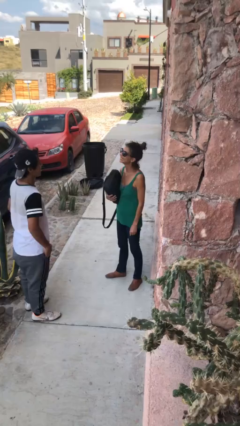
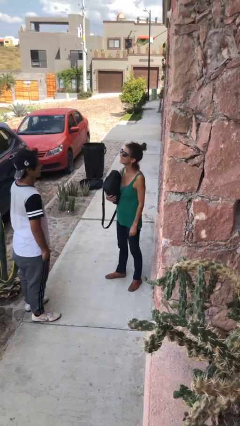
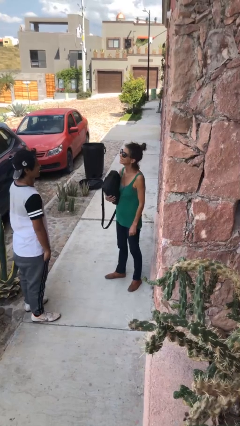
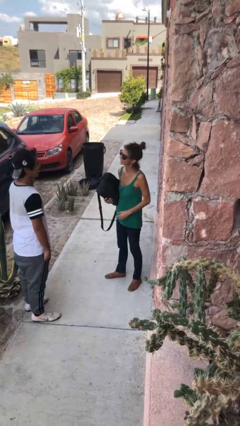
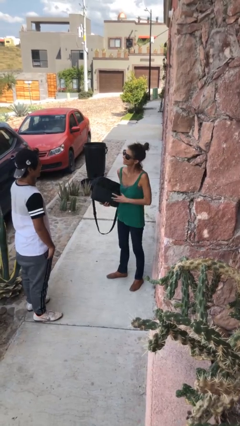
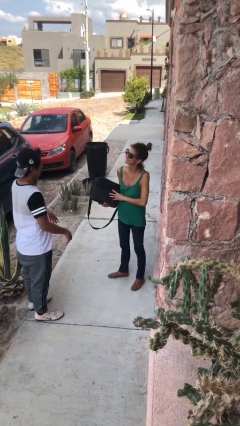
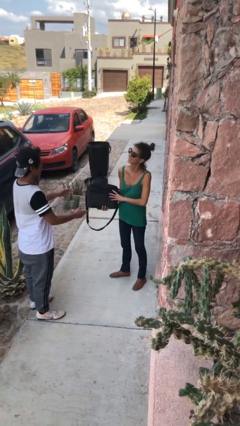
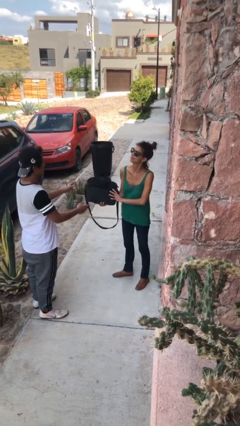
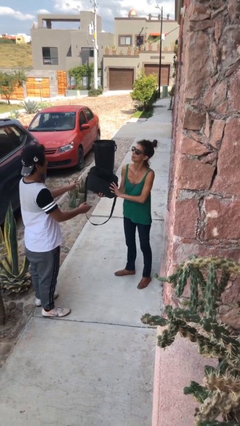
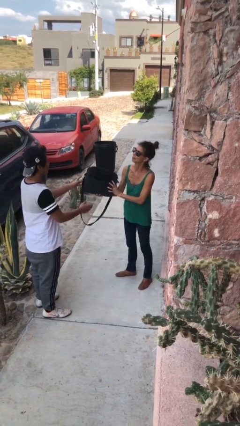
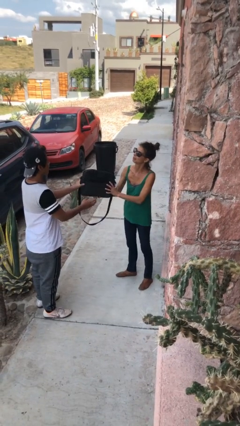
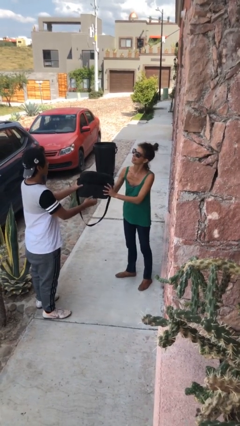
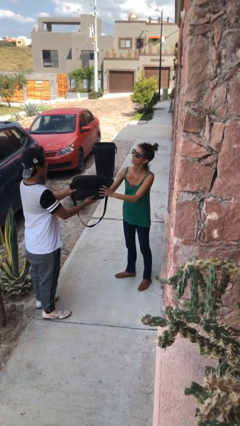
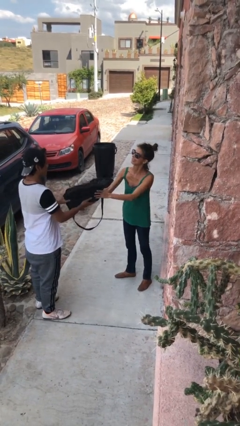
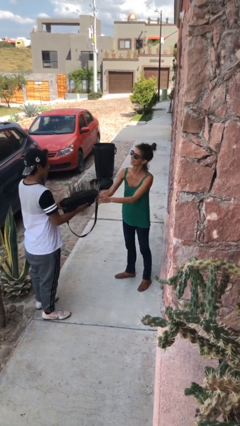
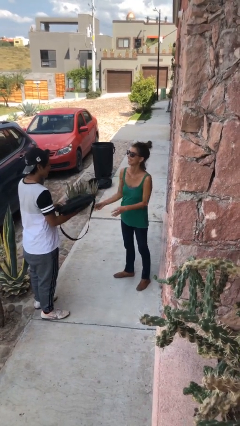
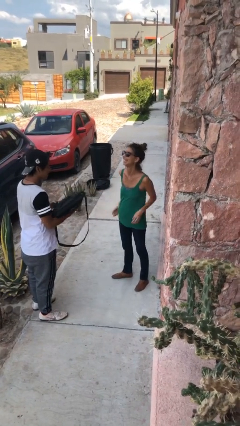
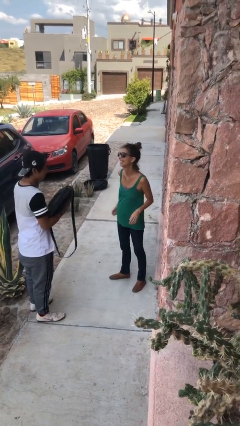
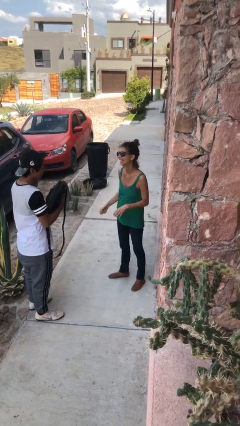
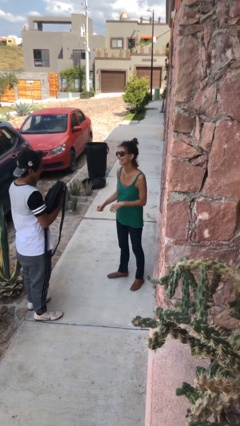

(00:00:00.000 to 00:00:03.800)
person transfers object to person

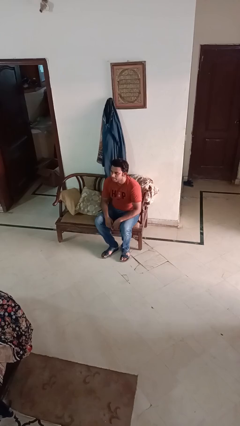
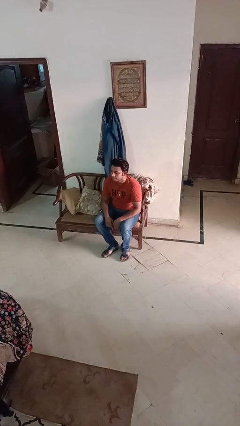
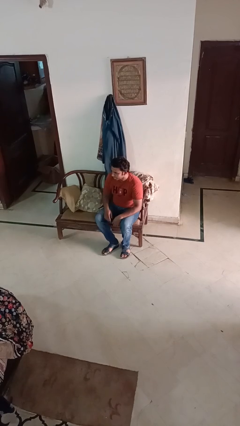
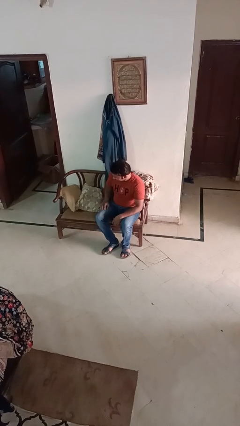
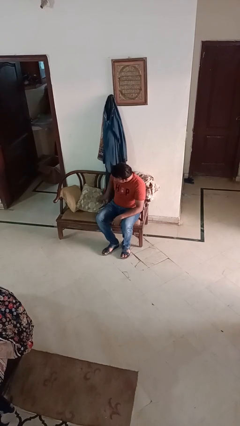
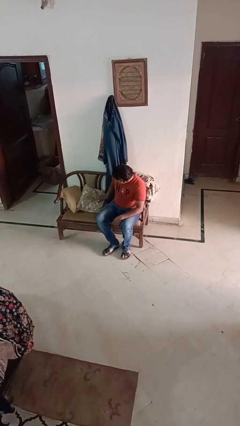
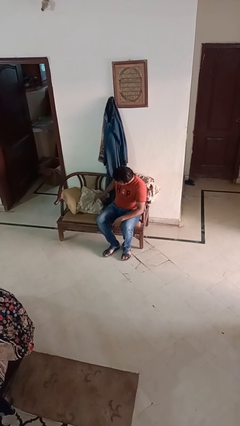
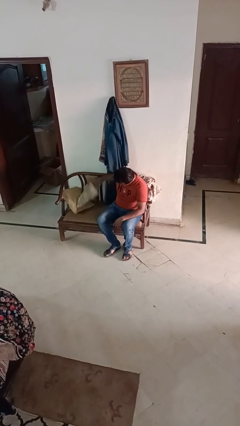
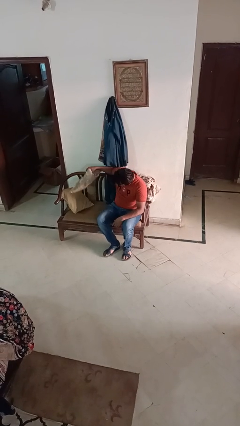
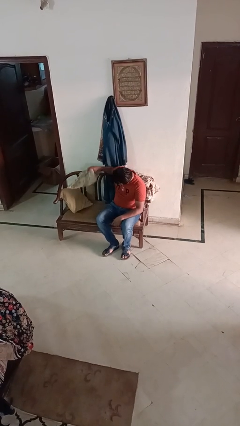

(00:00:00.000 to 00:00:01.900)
person searches in couch

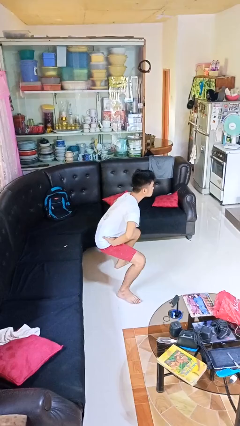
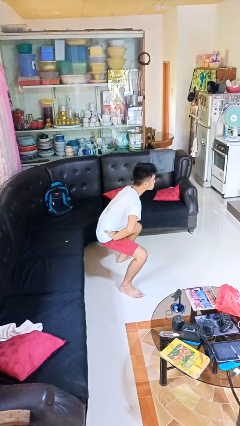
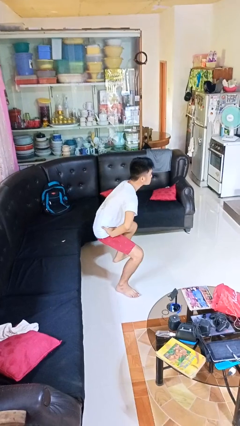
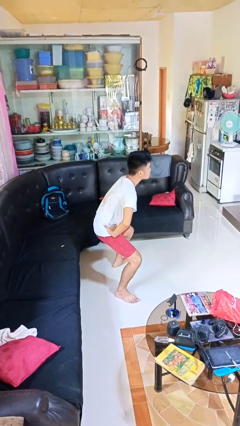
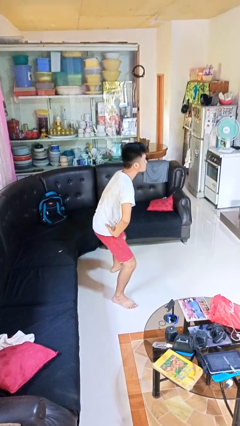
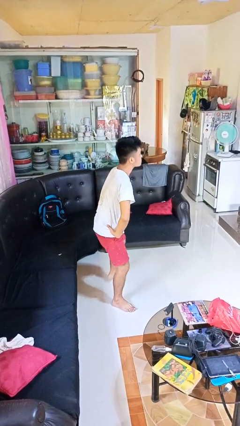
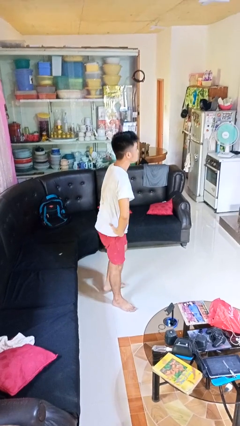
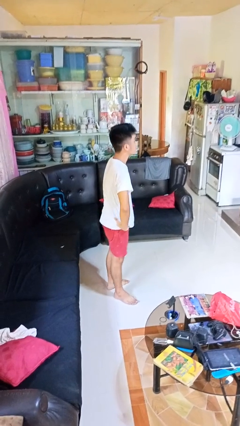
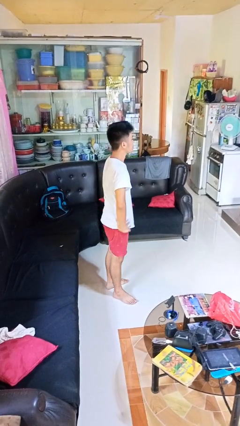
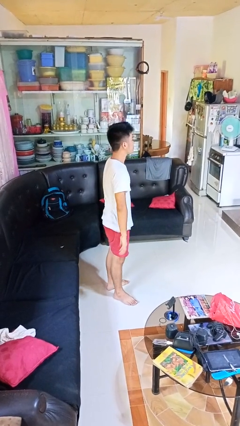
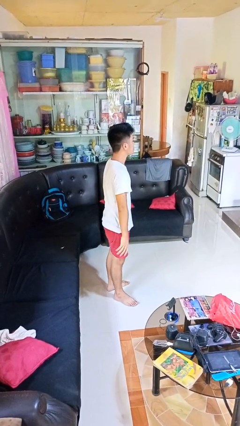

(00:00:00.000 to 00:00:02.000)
person stands up

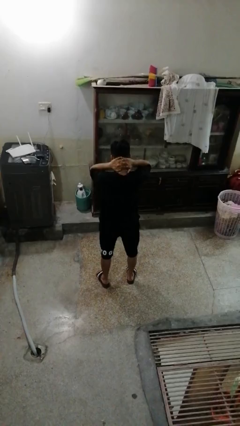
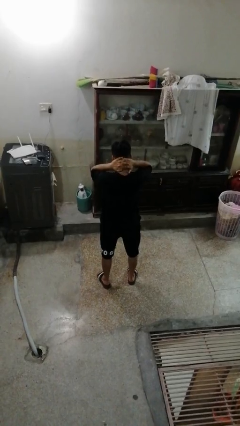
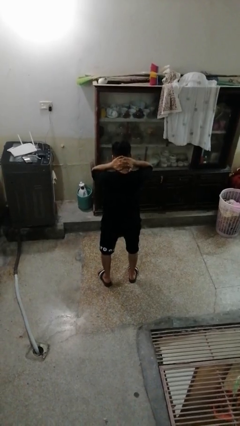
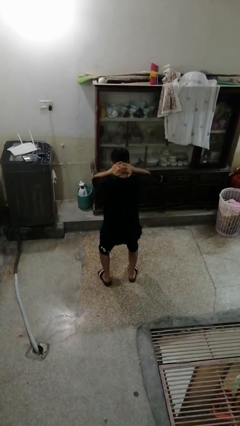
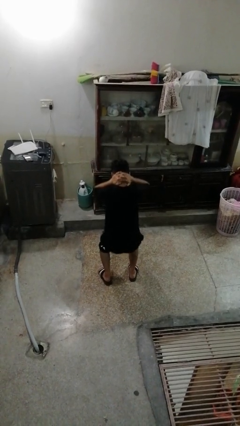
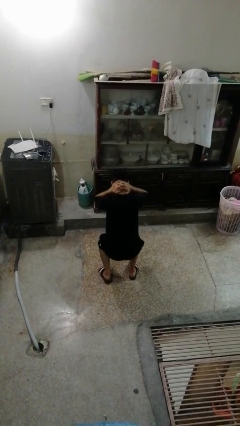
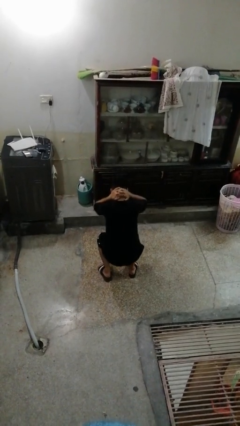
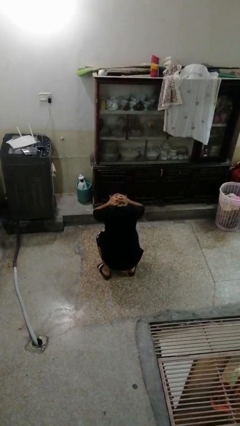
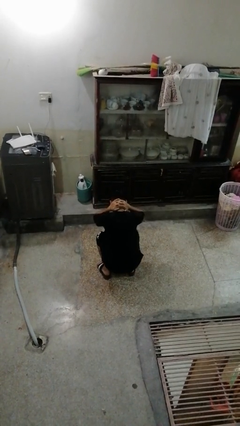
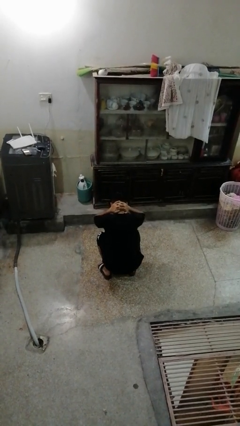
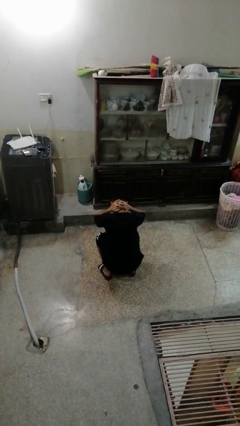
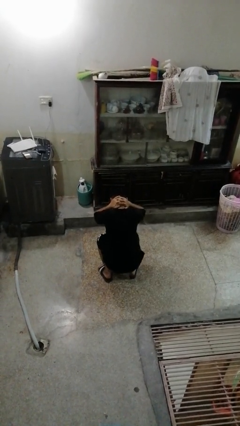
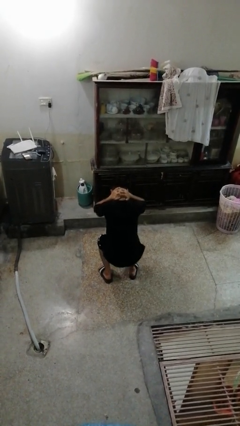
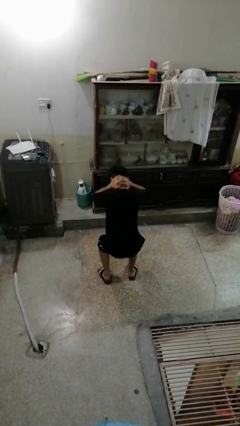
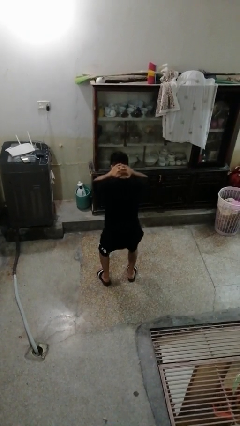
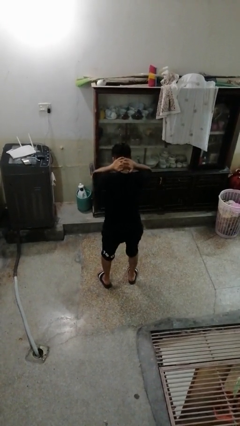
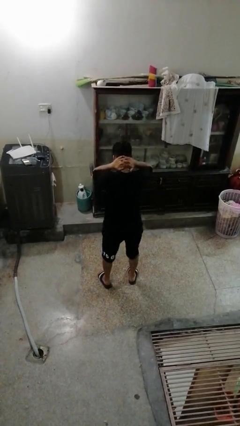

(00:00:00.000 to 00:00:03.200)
person exercises with situp

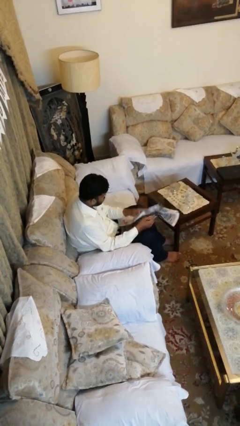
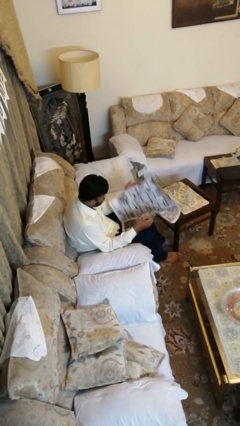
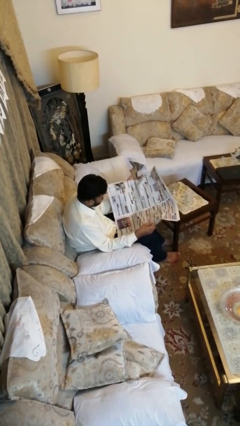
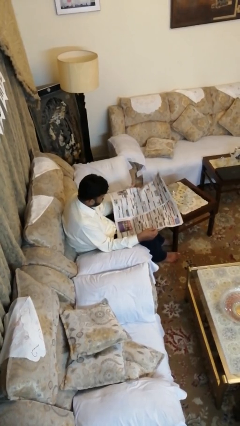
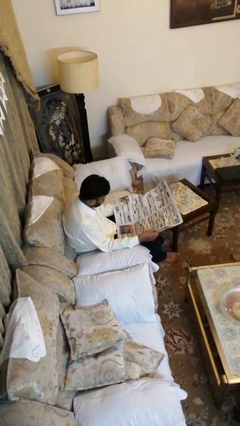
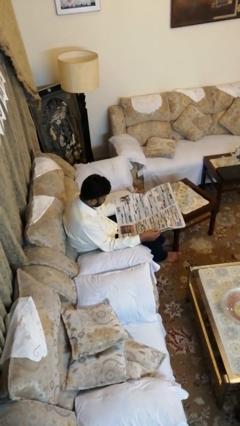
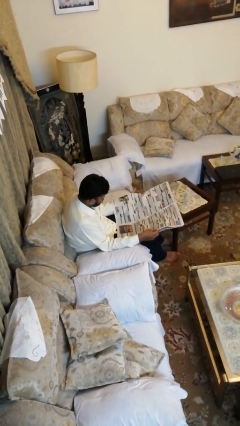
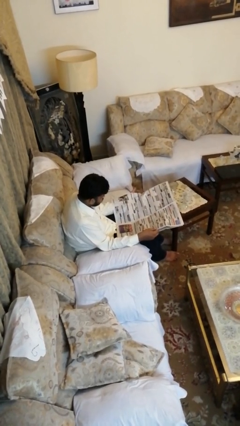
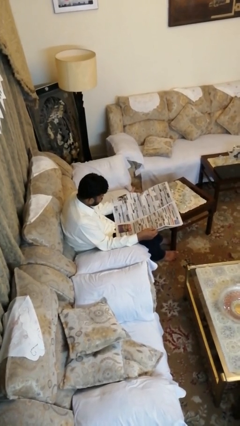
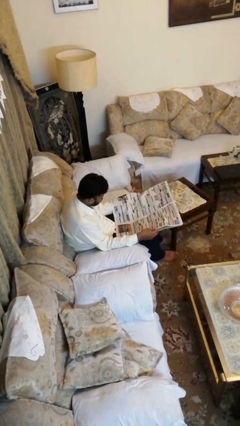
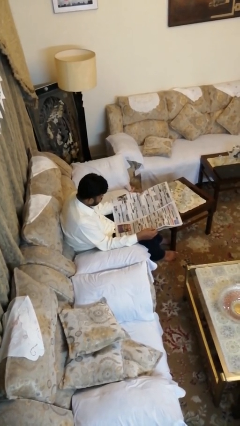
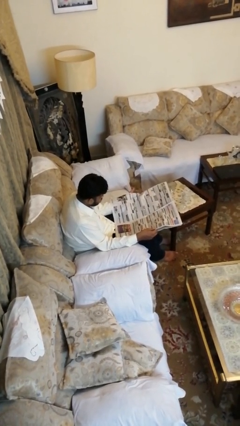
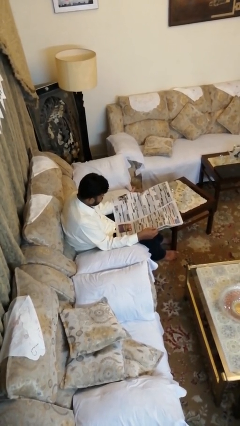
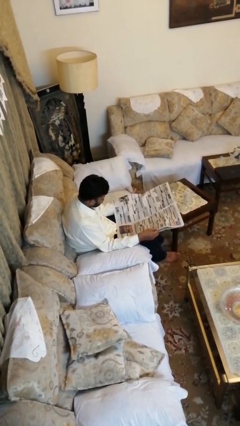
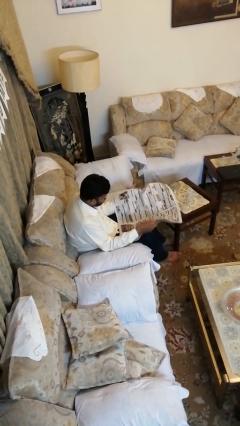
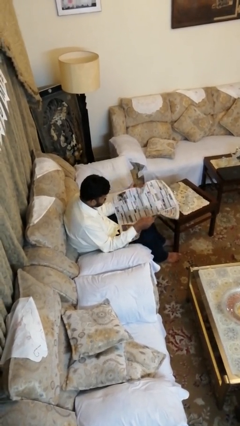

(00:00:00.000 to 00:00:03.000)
person reads newspaper

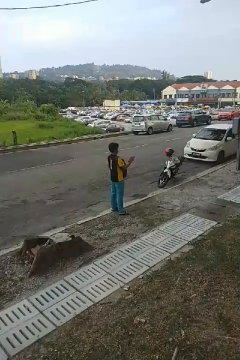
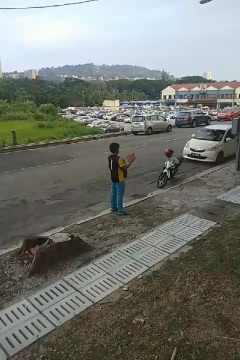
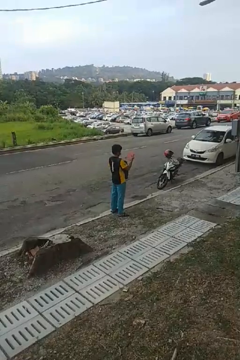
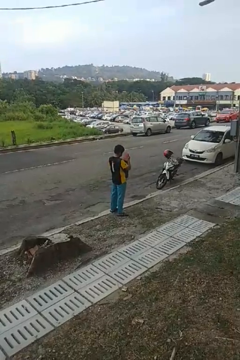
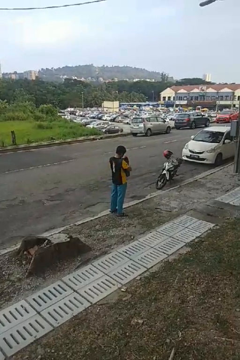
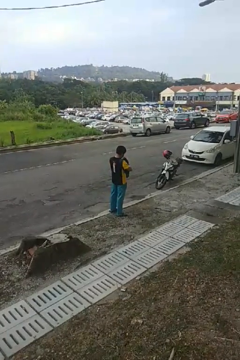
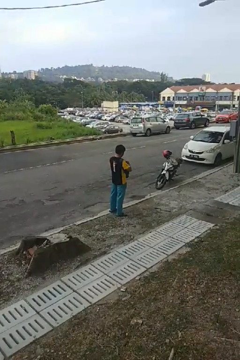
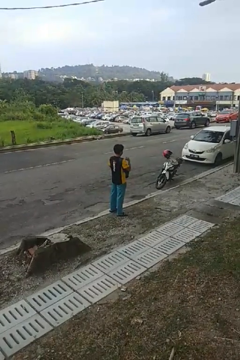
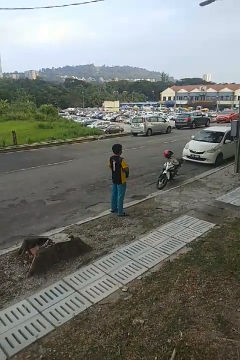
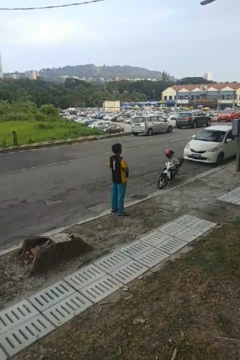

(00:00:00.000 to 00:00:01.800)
person puts object into backpack

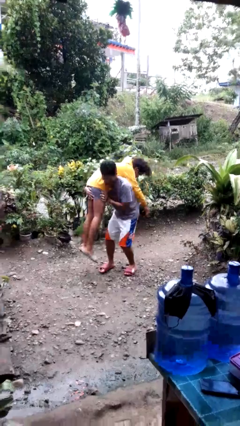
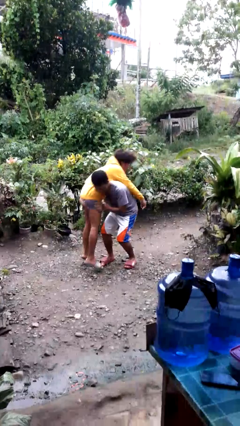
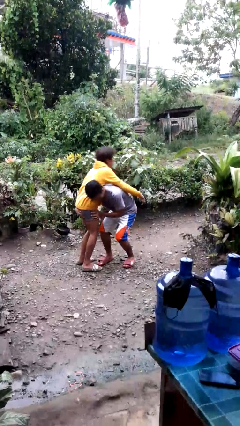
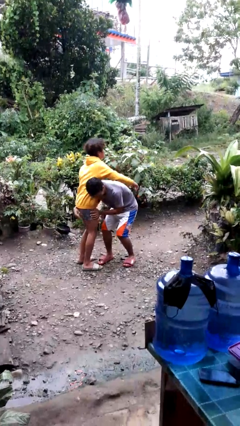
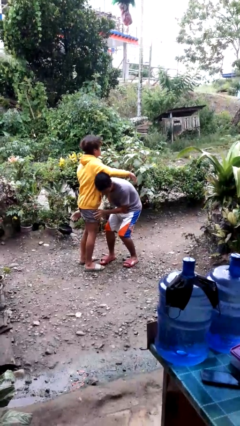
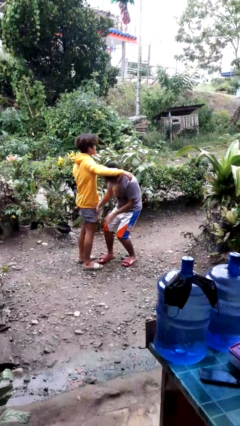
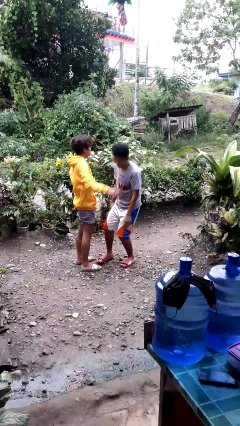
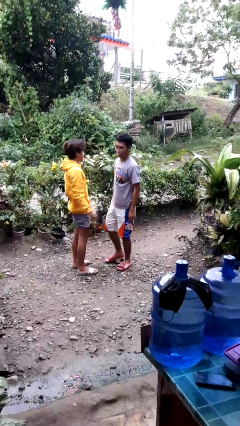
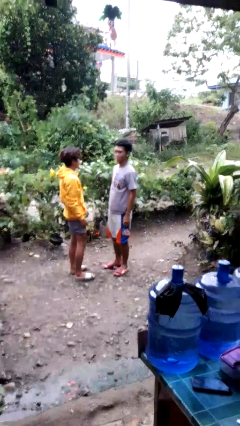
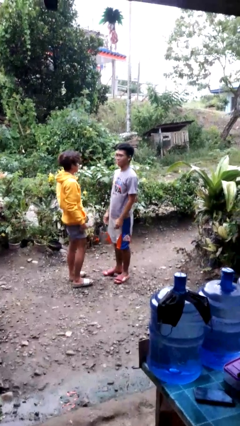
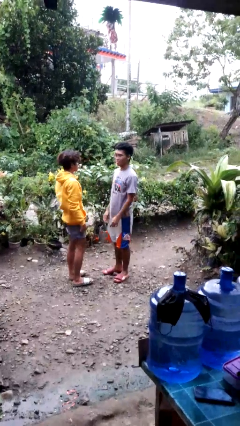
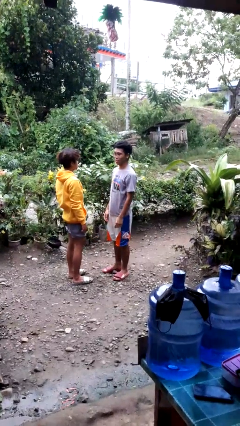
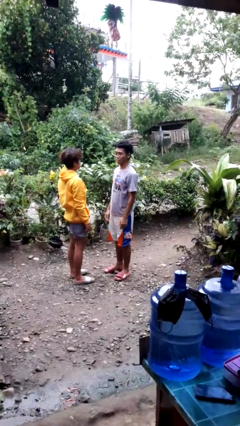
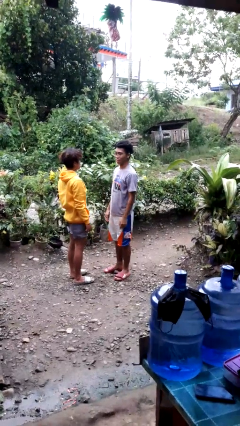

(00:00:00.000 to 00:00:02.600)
person puts down person
